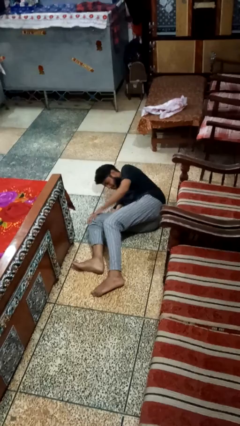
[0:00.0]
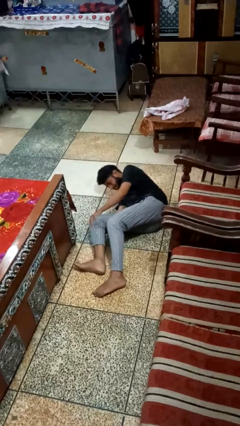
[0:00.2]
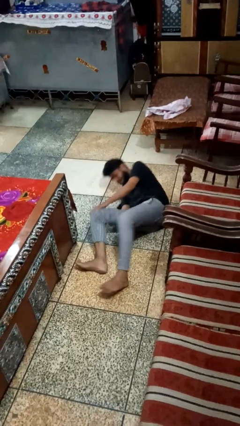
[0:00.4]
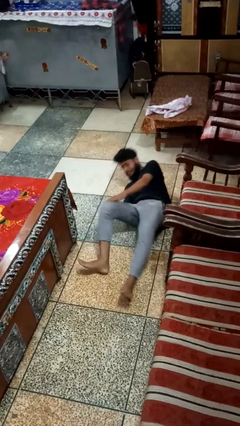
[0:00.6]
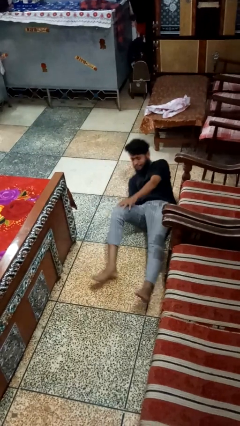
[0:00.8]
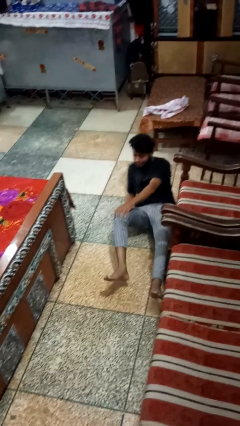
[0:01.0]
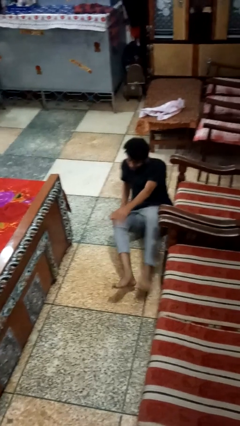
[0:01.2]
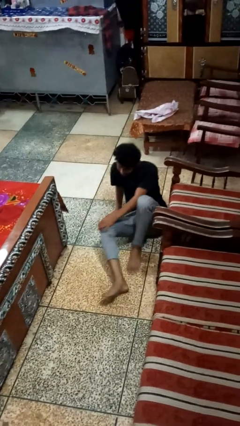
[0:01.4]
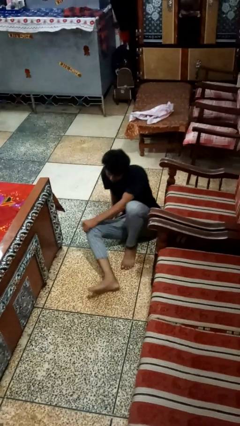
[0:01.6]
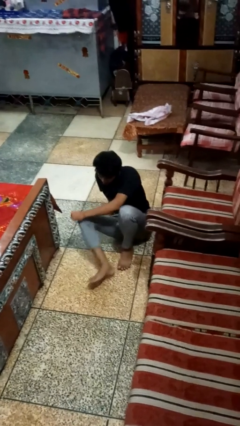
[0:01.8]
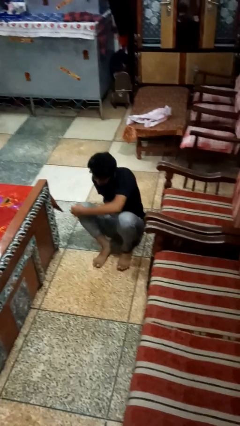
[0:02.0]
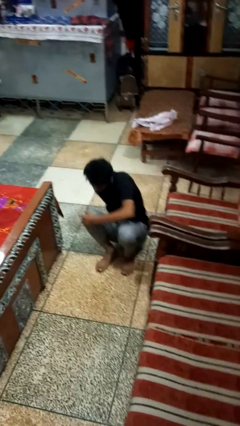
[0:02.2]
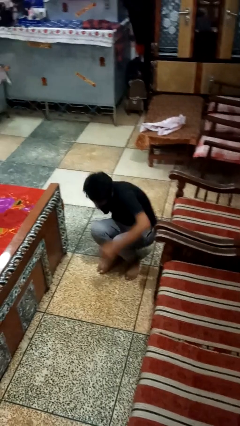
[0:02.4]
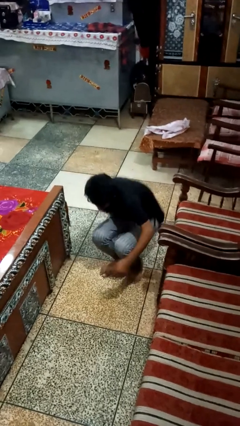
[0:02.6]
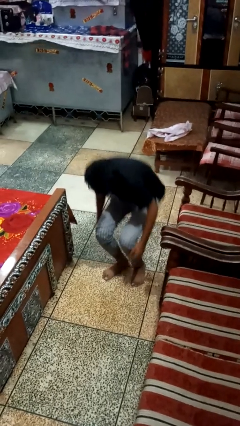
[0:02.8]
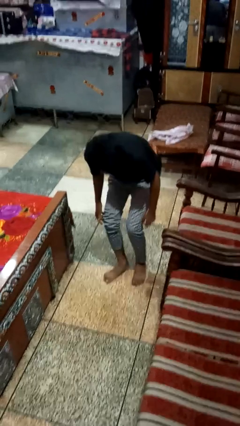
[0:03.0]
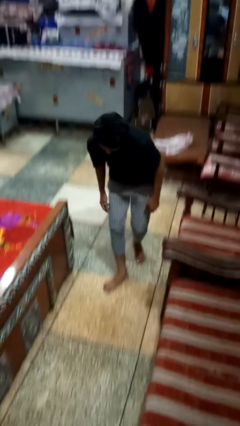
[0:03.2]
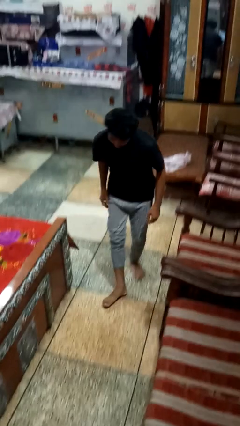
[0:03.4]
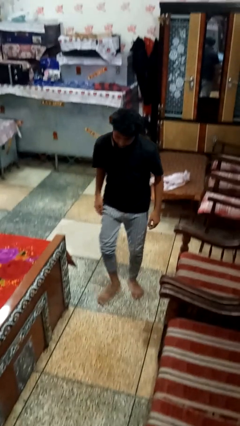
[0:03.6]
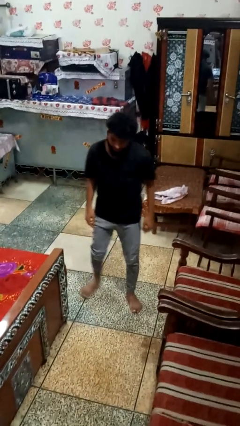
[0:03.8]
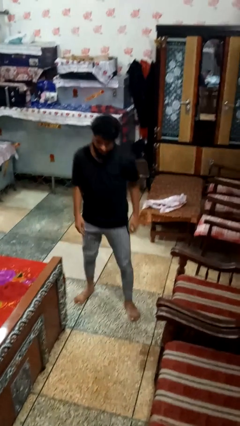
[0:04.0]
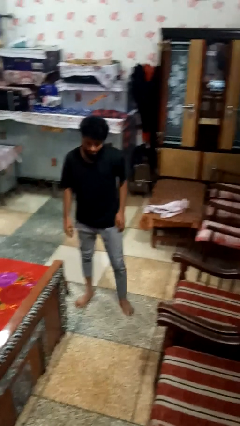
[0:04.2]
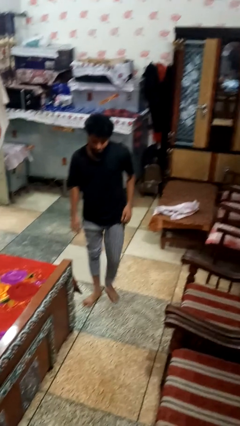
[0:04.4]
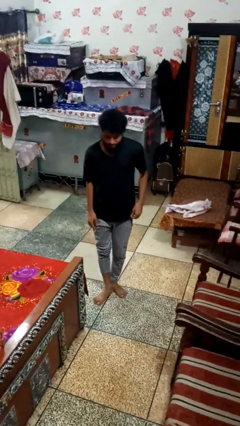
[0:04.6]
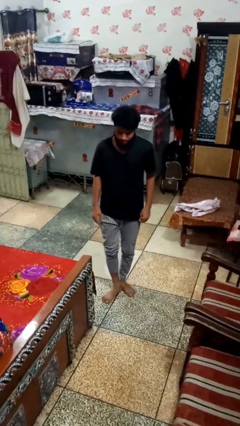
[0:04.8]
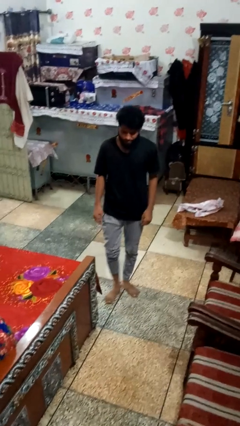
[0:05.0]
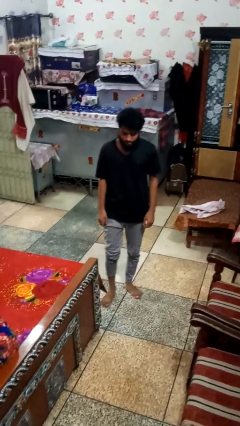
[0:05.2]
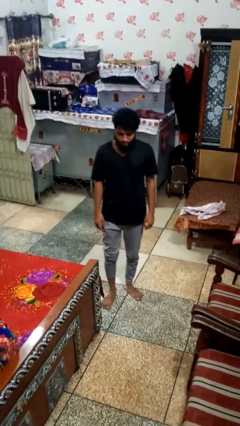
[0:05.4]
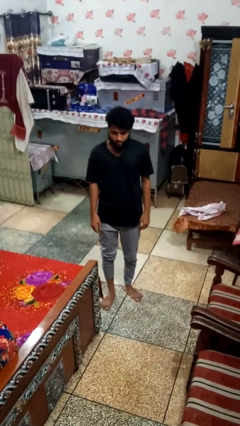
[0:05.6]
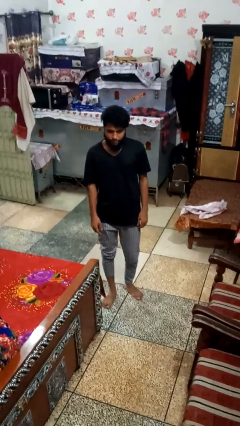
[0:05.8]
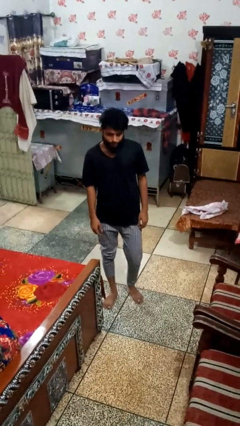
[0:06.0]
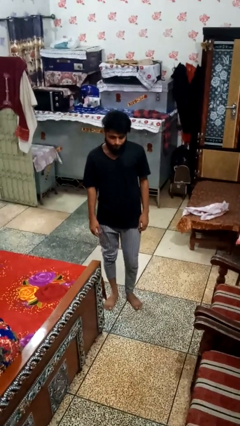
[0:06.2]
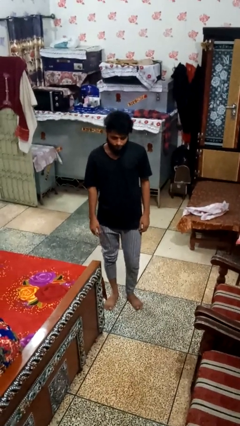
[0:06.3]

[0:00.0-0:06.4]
person stands up from floor

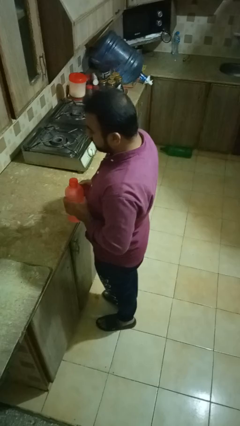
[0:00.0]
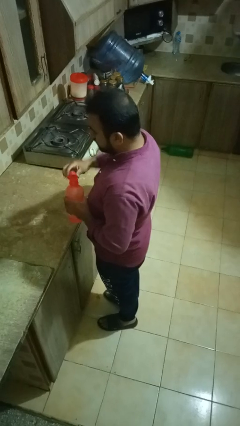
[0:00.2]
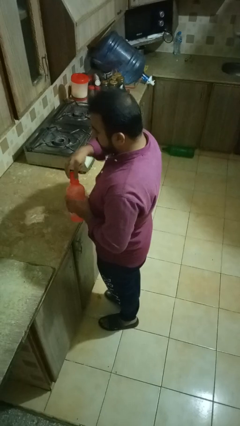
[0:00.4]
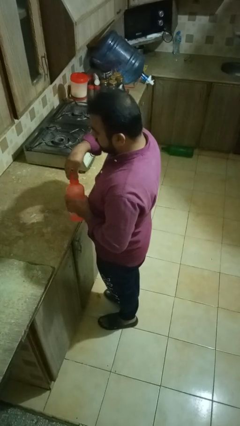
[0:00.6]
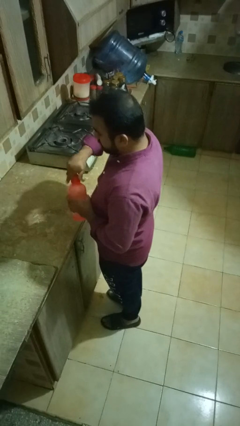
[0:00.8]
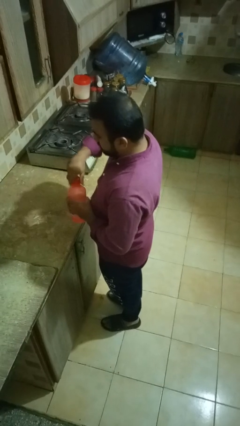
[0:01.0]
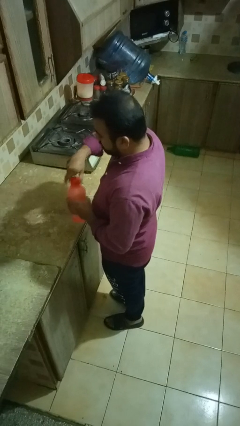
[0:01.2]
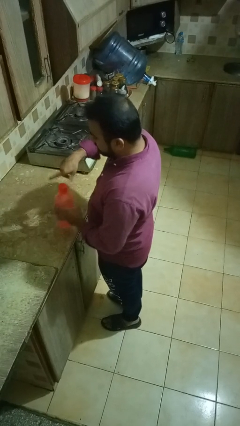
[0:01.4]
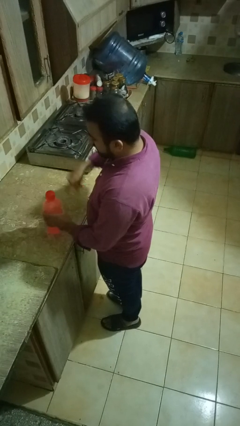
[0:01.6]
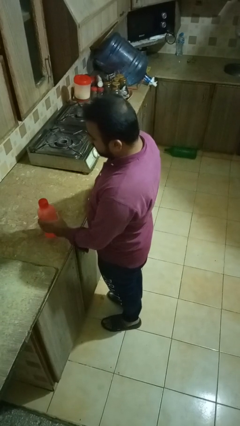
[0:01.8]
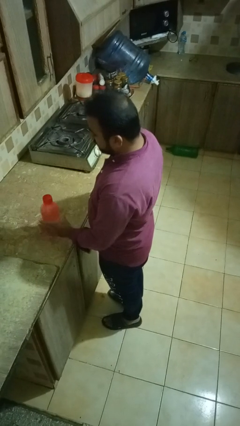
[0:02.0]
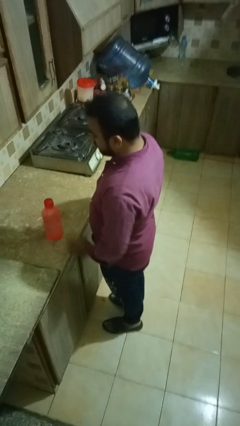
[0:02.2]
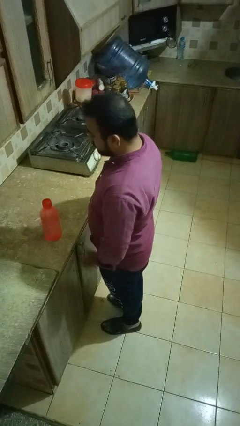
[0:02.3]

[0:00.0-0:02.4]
person screws lid to bottle

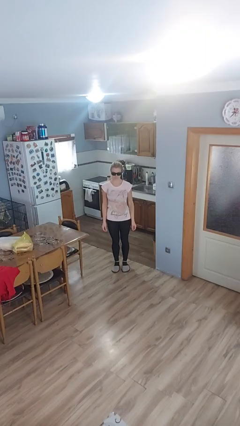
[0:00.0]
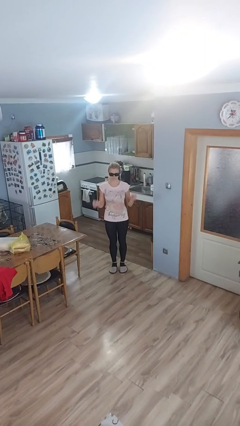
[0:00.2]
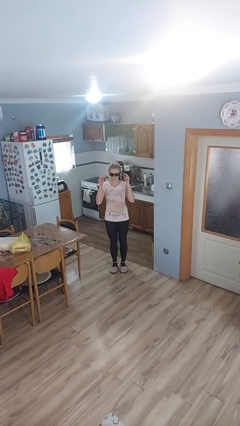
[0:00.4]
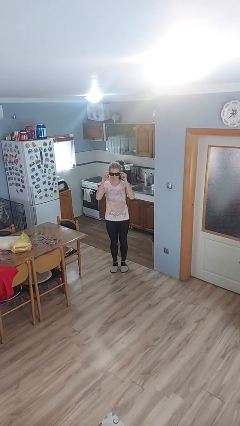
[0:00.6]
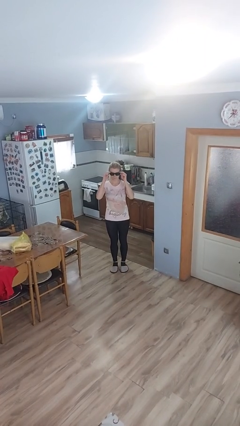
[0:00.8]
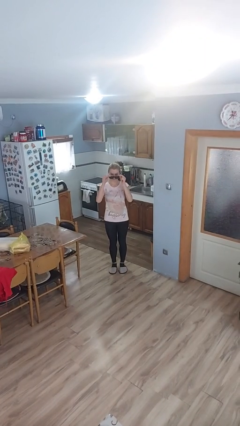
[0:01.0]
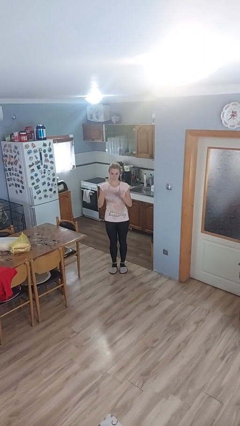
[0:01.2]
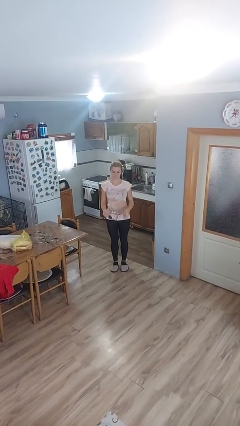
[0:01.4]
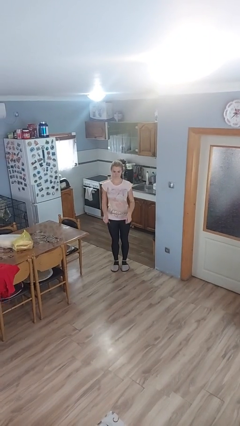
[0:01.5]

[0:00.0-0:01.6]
person takes off sunglasses

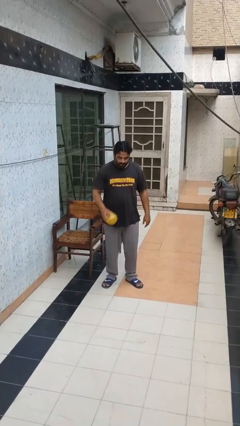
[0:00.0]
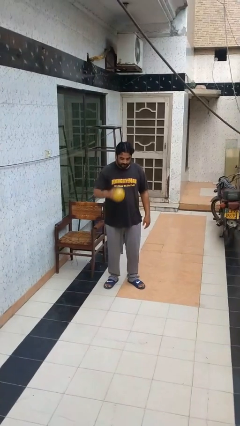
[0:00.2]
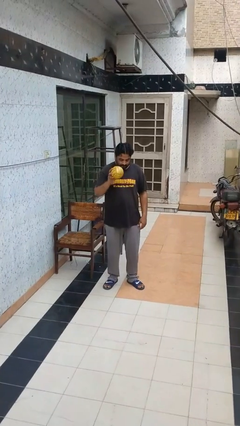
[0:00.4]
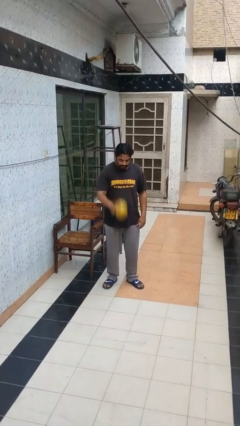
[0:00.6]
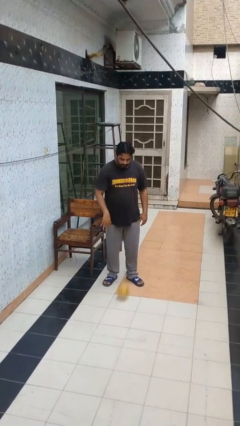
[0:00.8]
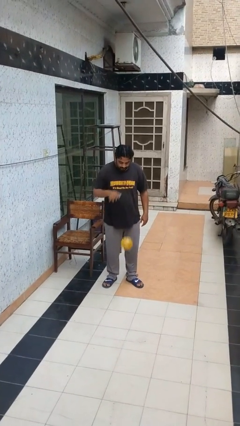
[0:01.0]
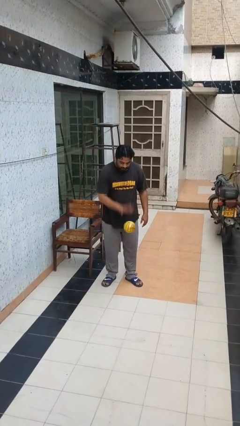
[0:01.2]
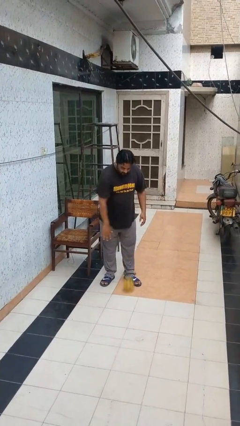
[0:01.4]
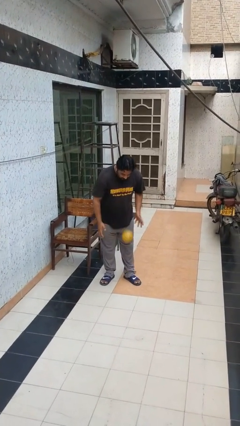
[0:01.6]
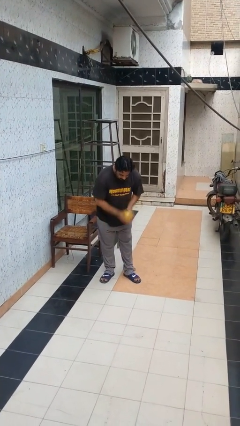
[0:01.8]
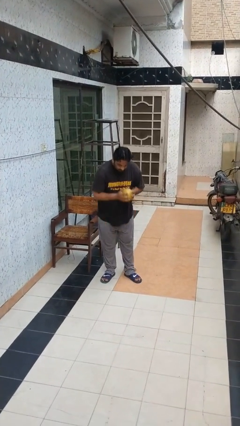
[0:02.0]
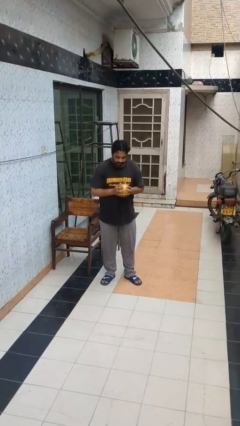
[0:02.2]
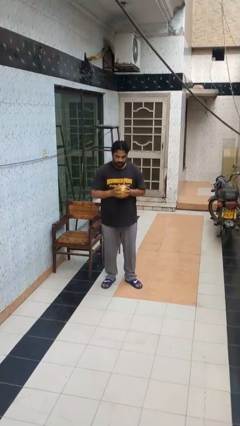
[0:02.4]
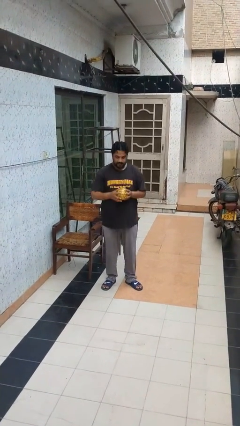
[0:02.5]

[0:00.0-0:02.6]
person bounces ball on floor

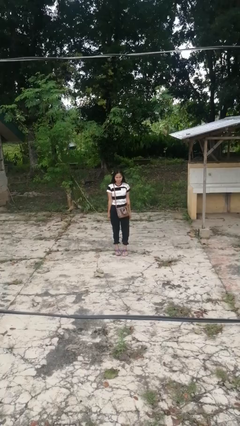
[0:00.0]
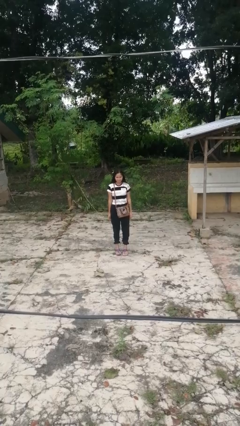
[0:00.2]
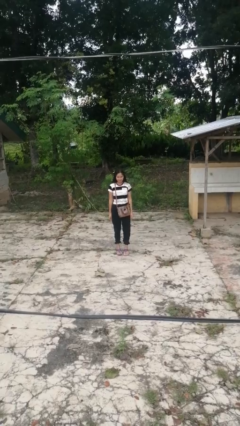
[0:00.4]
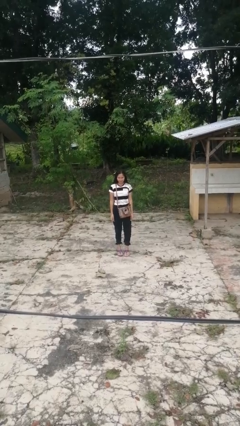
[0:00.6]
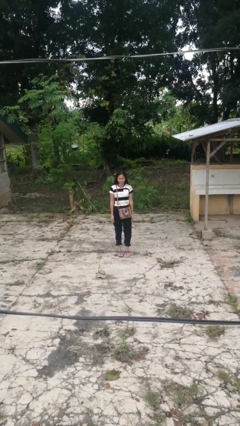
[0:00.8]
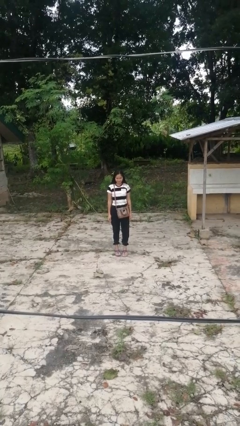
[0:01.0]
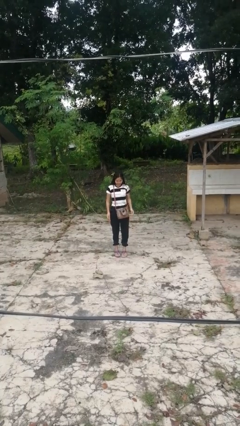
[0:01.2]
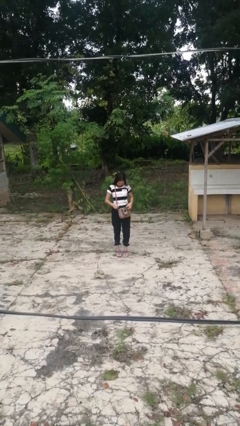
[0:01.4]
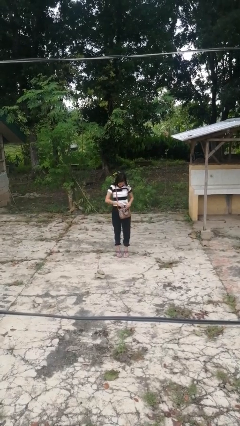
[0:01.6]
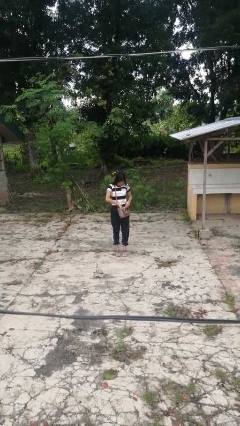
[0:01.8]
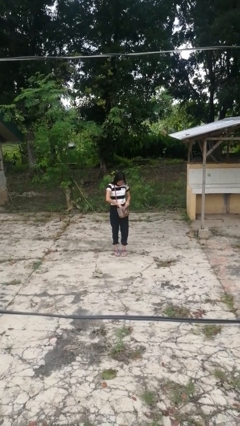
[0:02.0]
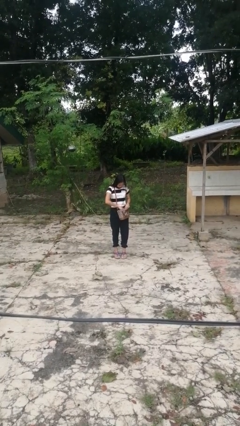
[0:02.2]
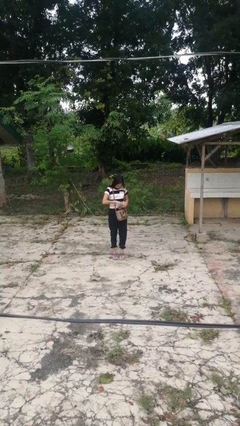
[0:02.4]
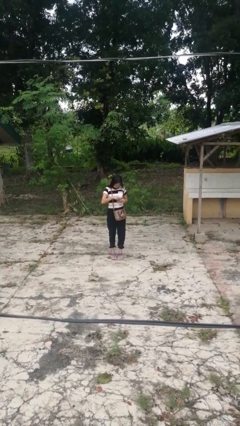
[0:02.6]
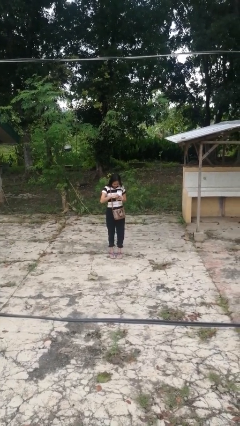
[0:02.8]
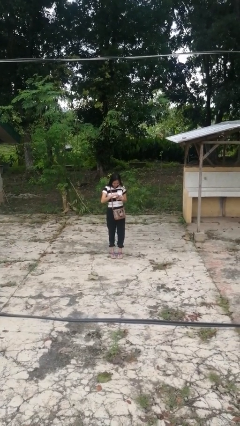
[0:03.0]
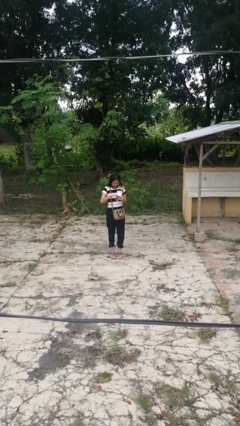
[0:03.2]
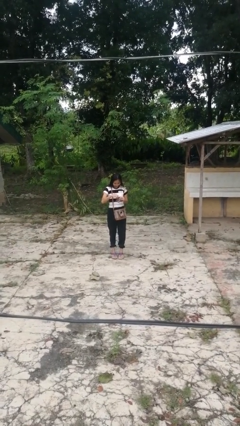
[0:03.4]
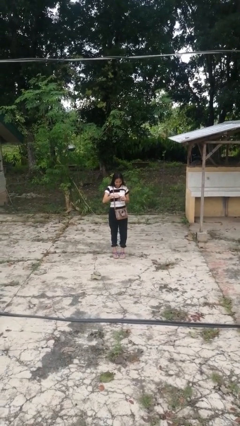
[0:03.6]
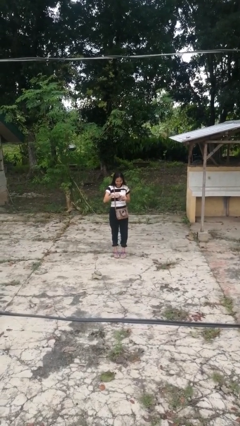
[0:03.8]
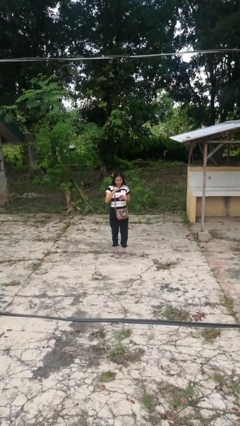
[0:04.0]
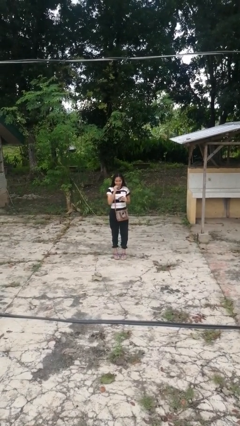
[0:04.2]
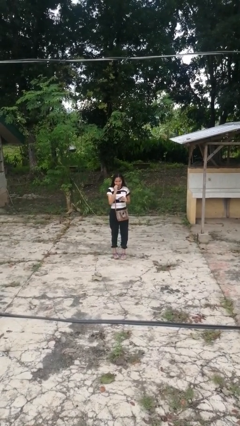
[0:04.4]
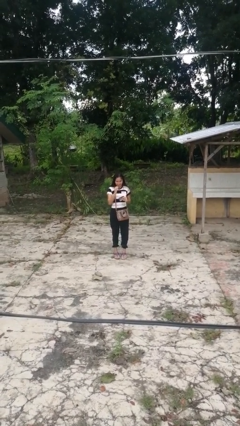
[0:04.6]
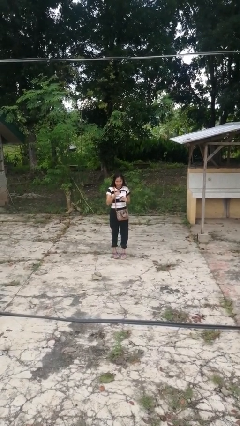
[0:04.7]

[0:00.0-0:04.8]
person eats snack from bag
